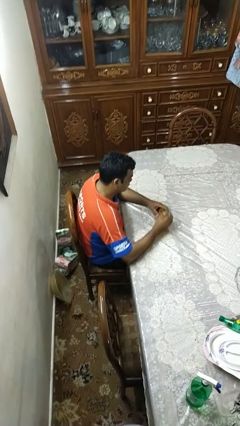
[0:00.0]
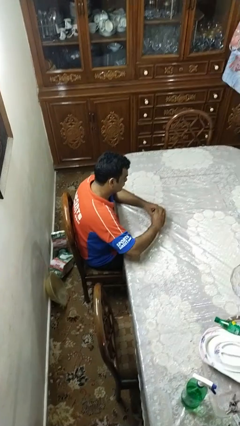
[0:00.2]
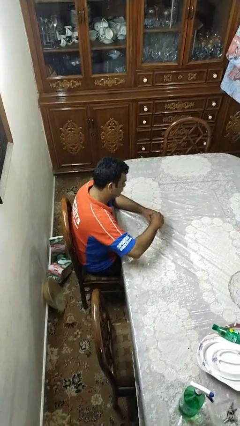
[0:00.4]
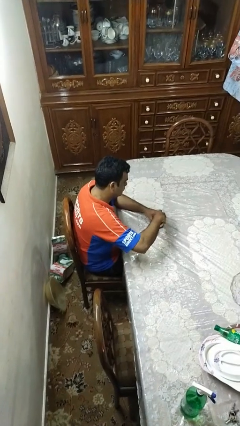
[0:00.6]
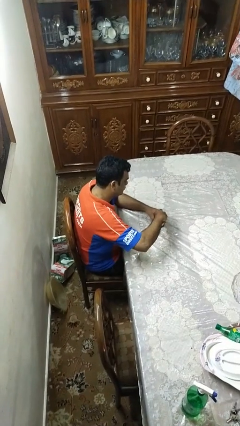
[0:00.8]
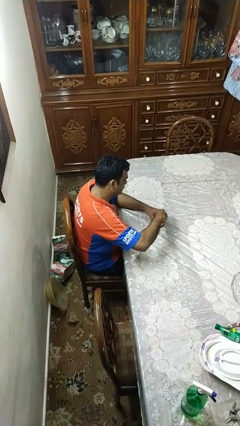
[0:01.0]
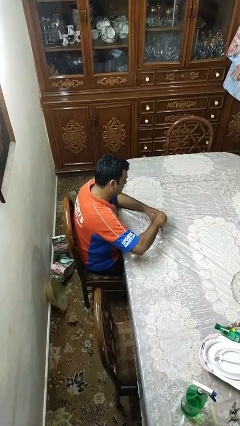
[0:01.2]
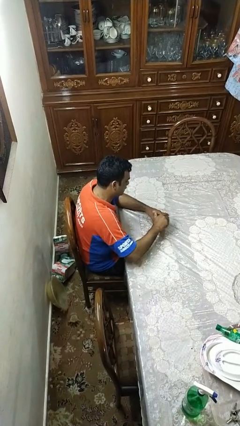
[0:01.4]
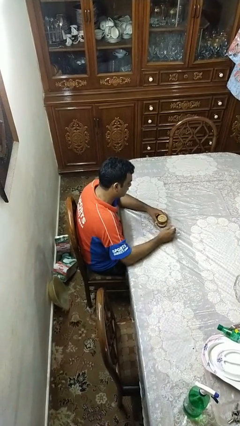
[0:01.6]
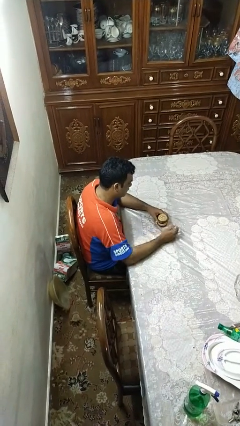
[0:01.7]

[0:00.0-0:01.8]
person closes jar

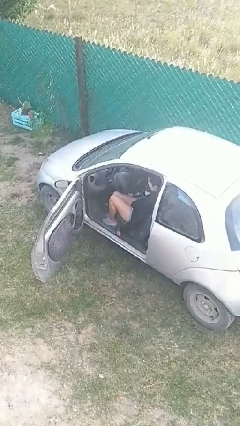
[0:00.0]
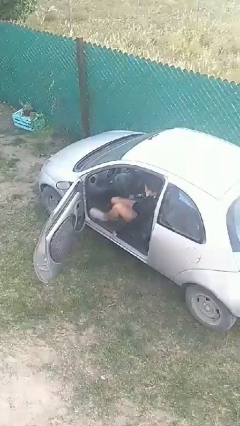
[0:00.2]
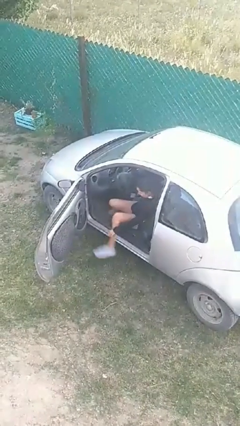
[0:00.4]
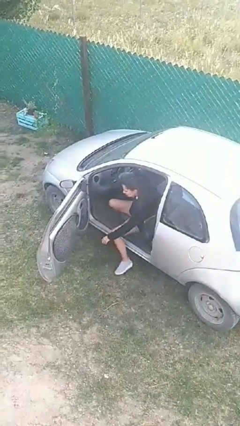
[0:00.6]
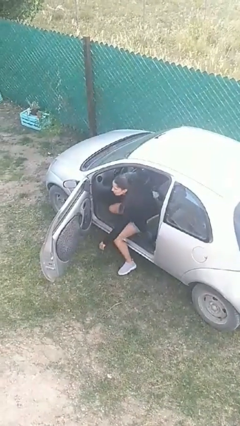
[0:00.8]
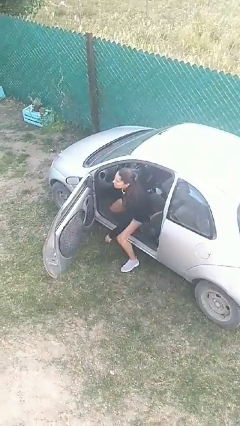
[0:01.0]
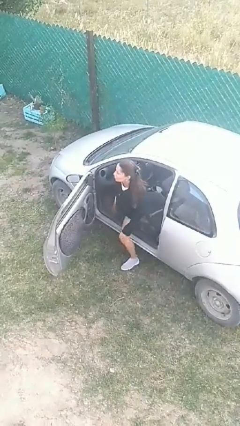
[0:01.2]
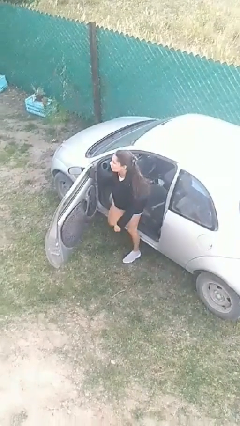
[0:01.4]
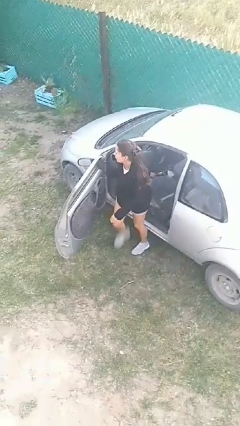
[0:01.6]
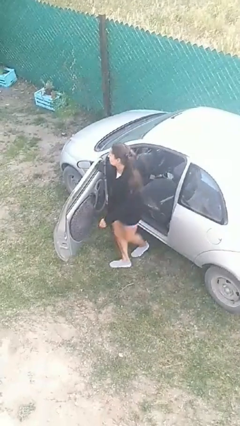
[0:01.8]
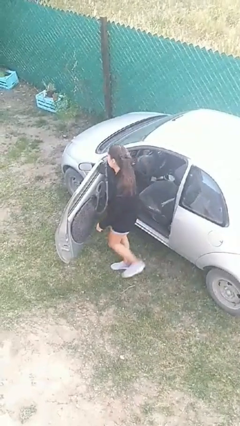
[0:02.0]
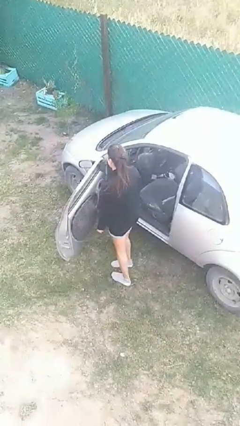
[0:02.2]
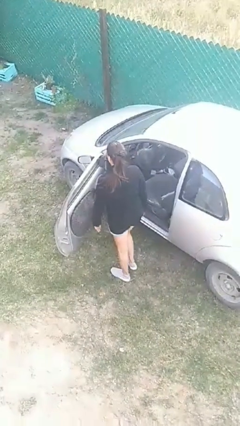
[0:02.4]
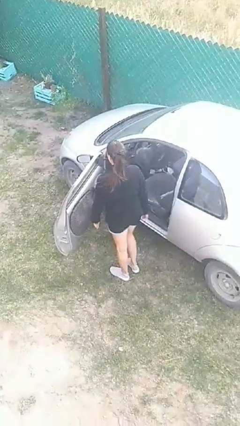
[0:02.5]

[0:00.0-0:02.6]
person exits car

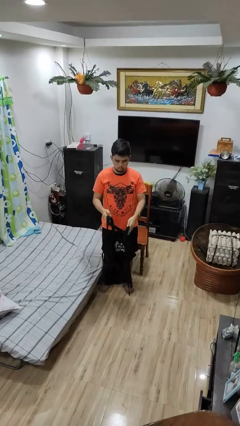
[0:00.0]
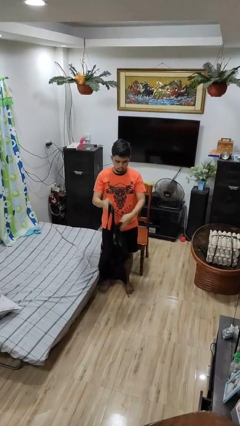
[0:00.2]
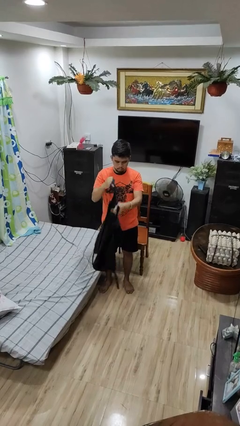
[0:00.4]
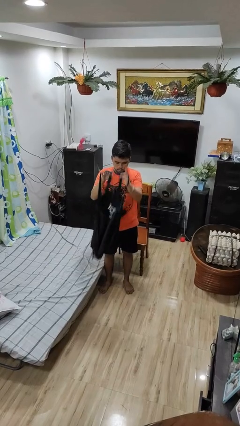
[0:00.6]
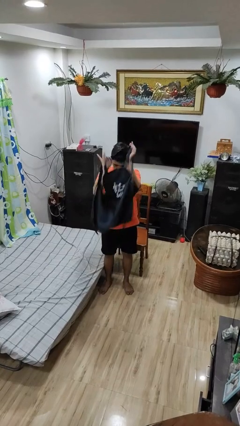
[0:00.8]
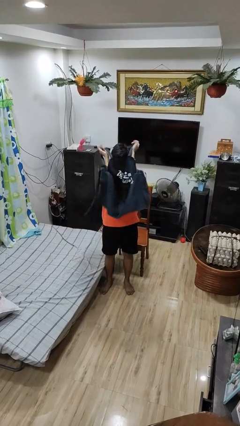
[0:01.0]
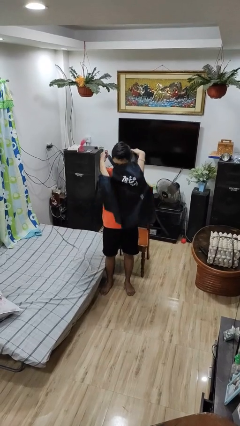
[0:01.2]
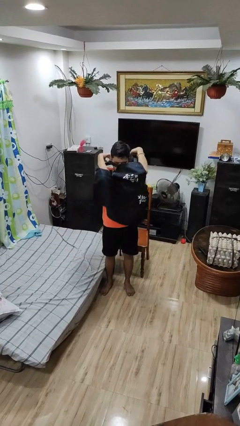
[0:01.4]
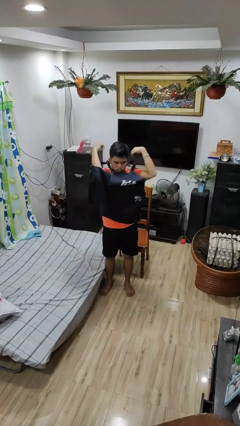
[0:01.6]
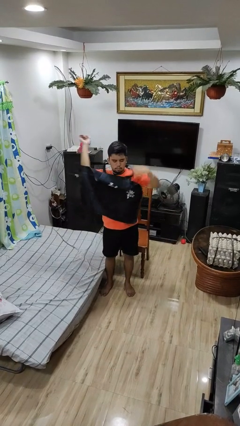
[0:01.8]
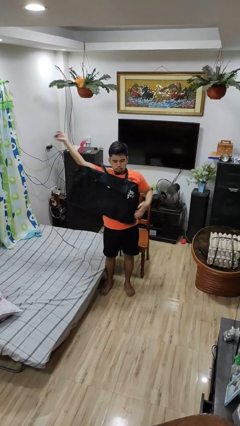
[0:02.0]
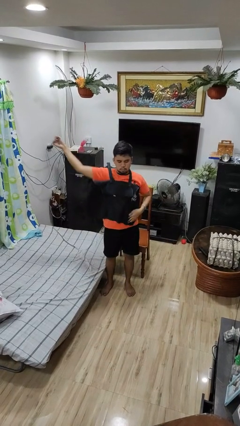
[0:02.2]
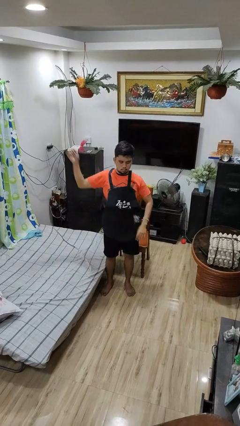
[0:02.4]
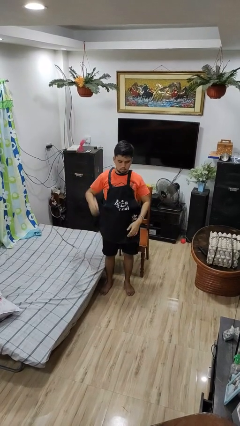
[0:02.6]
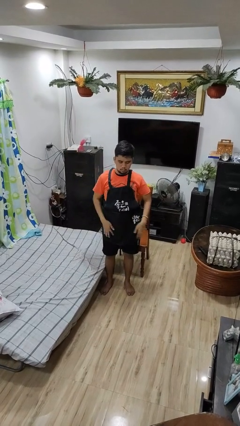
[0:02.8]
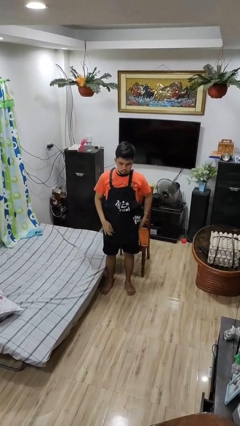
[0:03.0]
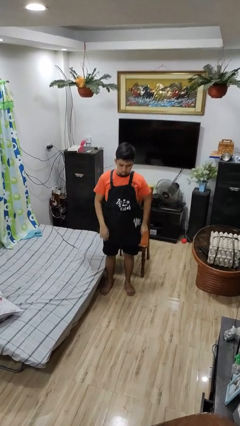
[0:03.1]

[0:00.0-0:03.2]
person puts on apron

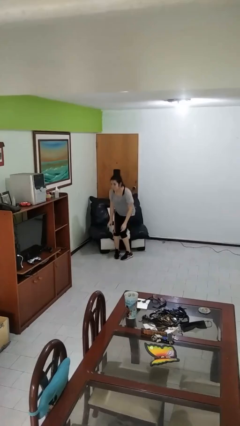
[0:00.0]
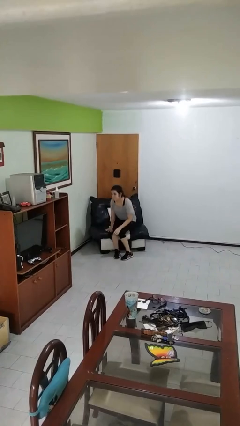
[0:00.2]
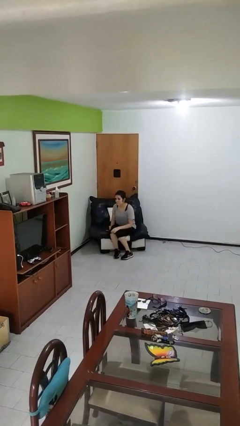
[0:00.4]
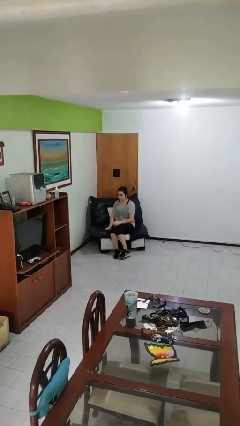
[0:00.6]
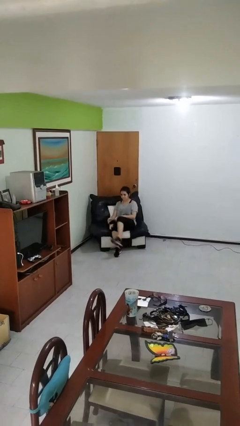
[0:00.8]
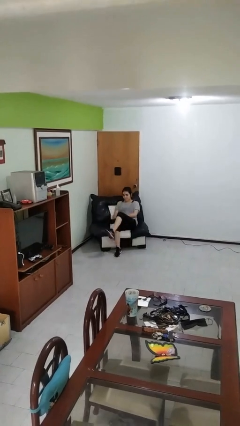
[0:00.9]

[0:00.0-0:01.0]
person lies down on couch

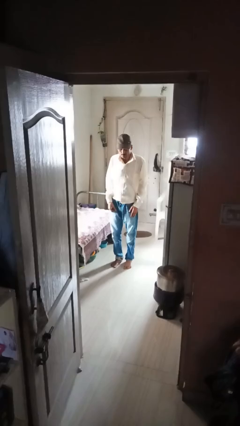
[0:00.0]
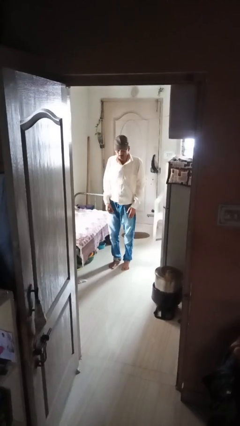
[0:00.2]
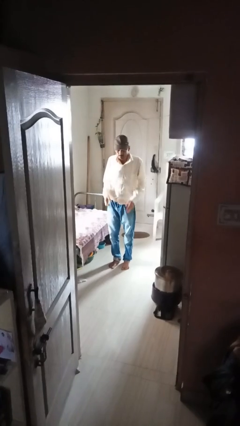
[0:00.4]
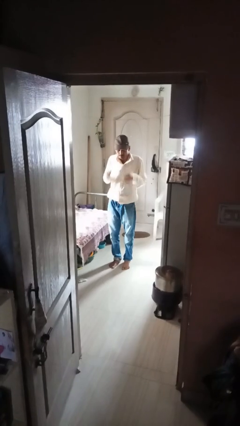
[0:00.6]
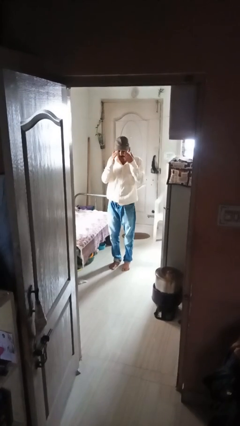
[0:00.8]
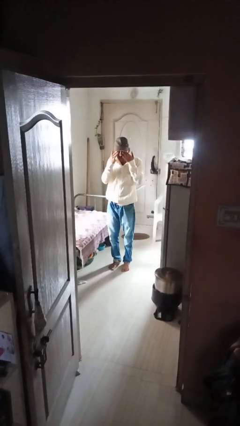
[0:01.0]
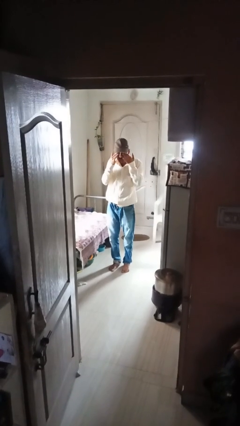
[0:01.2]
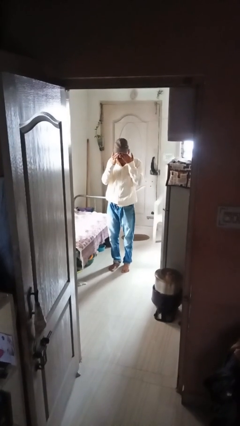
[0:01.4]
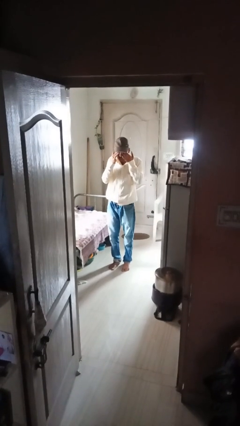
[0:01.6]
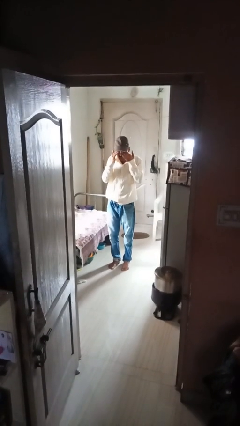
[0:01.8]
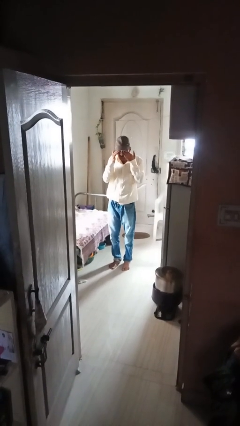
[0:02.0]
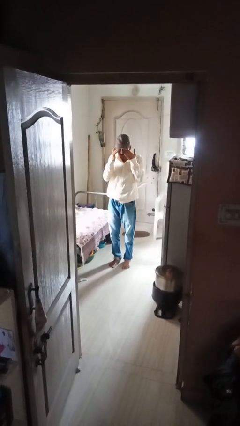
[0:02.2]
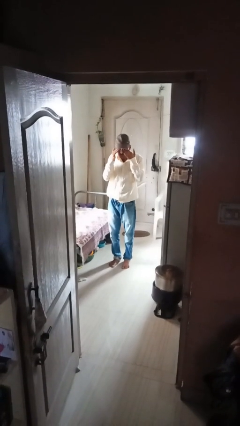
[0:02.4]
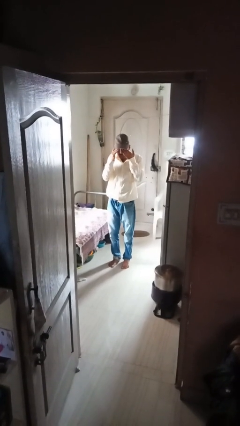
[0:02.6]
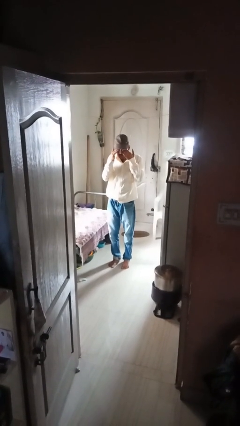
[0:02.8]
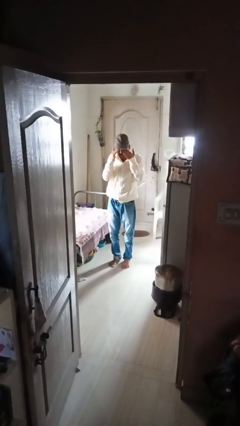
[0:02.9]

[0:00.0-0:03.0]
person rubs eyes

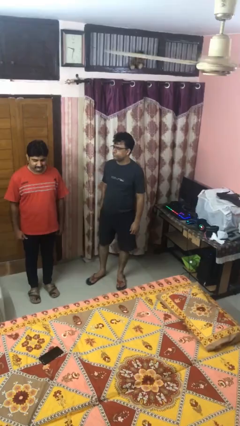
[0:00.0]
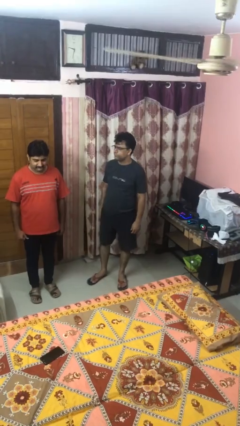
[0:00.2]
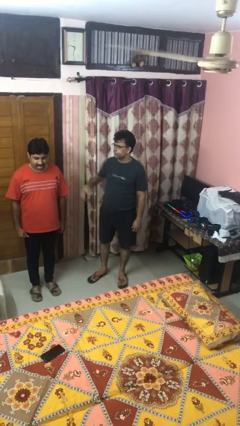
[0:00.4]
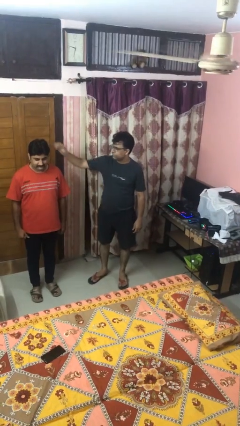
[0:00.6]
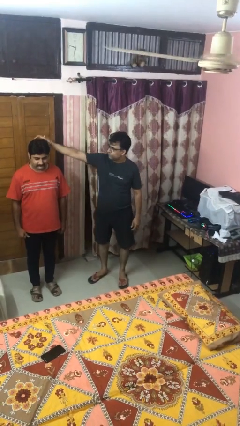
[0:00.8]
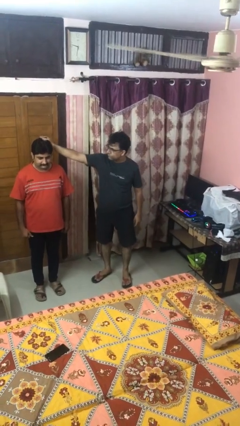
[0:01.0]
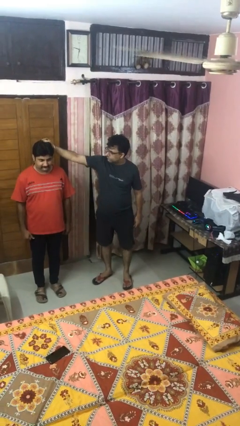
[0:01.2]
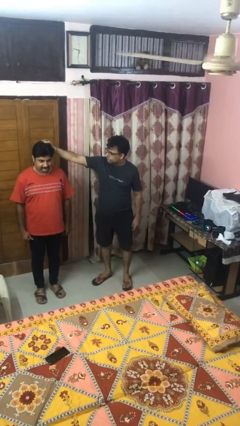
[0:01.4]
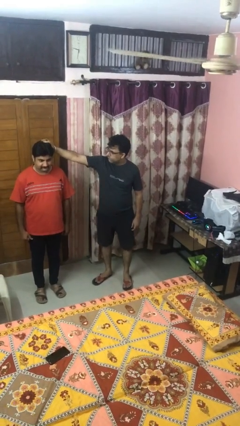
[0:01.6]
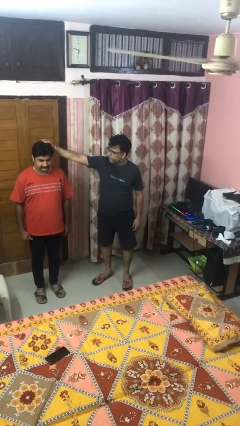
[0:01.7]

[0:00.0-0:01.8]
person grabs person by hair

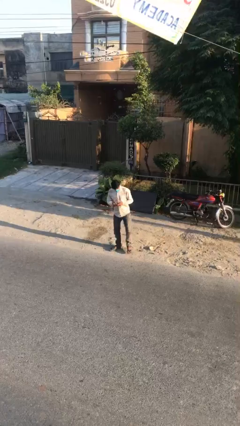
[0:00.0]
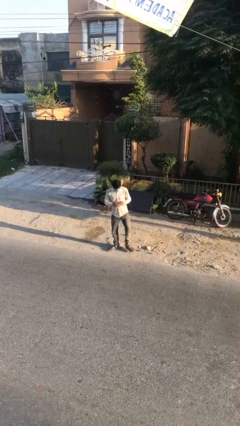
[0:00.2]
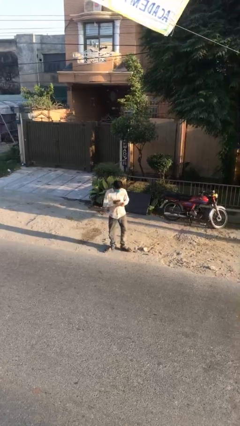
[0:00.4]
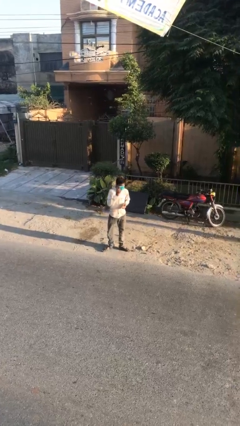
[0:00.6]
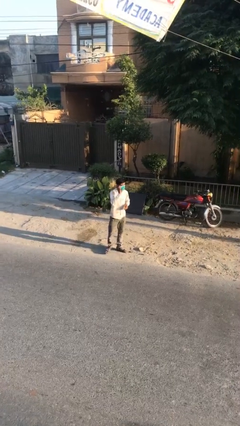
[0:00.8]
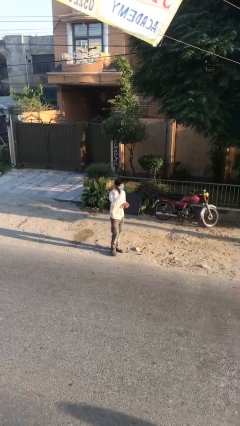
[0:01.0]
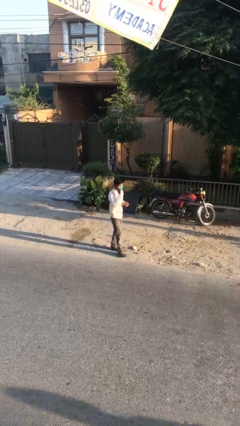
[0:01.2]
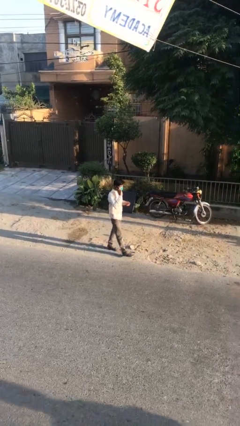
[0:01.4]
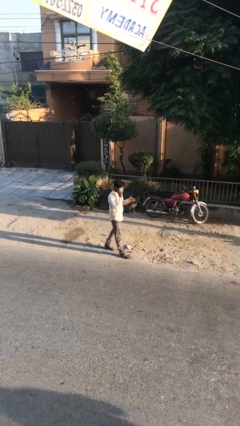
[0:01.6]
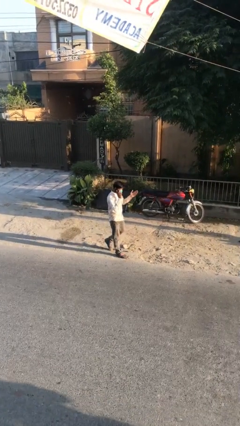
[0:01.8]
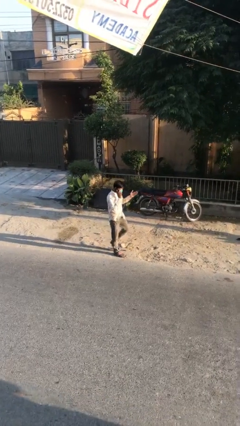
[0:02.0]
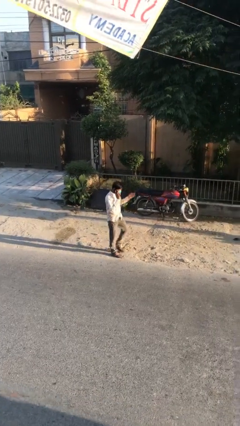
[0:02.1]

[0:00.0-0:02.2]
person talks on phone

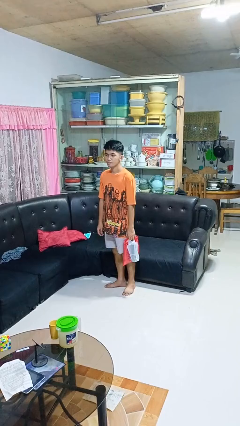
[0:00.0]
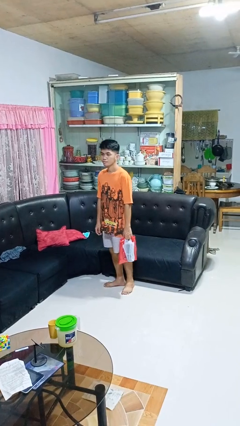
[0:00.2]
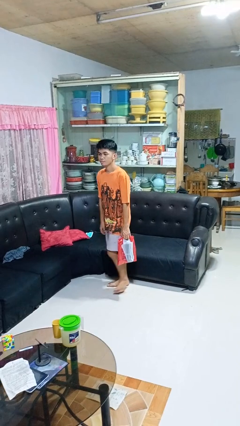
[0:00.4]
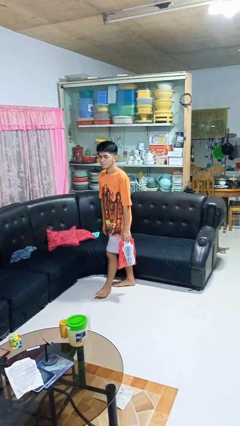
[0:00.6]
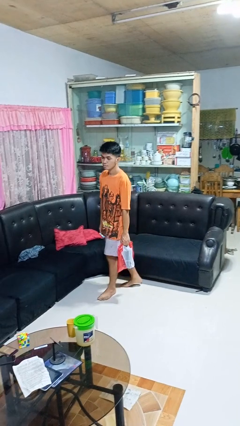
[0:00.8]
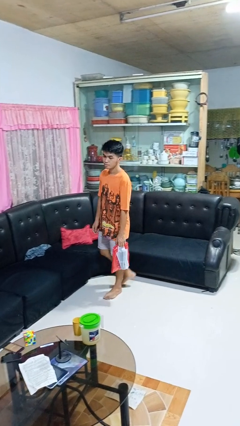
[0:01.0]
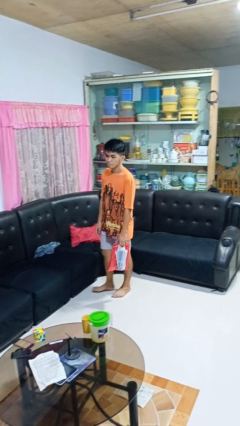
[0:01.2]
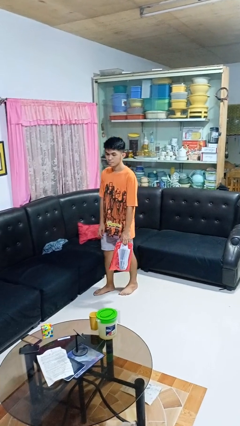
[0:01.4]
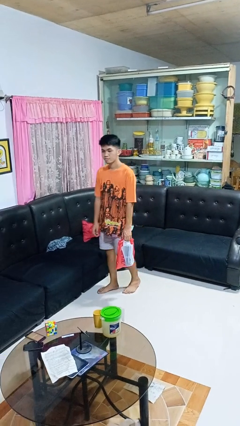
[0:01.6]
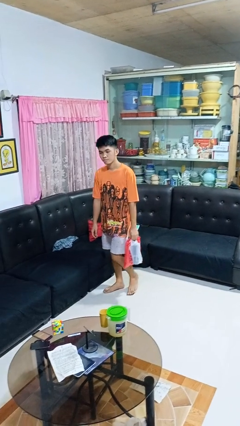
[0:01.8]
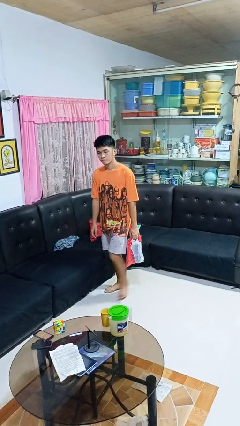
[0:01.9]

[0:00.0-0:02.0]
person carries groceries
